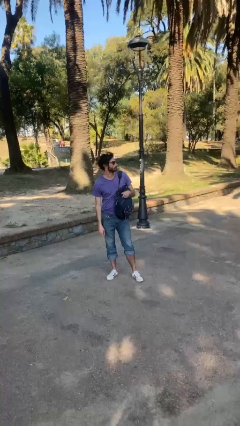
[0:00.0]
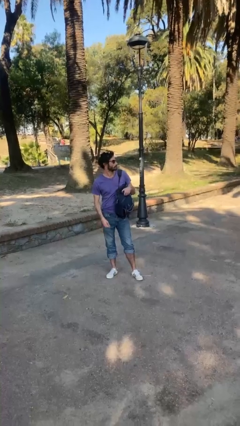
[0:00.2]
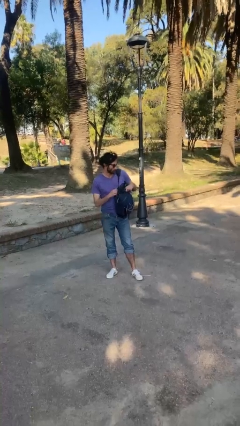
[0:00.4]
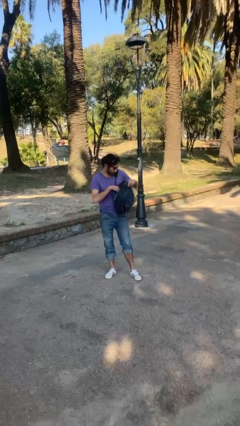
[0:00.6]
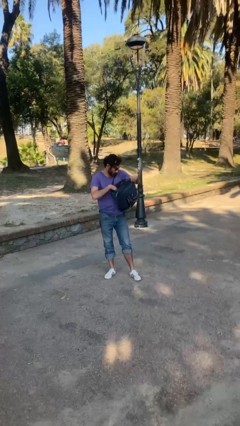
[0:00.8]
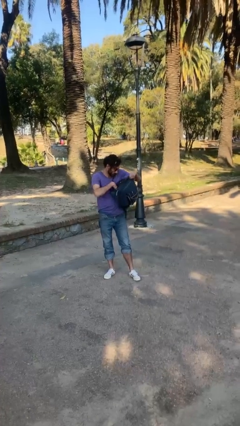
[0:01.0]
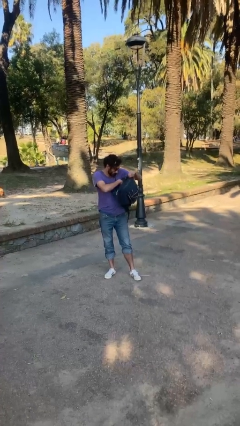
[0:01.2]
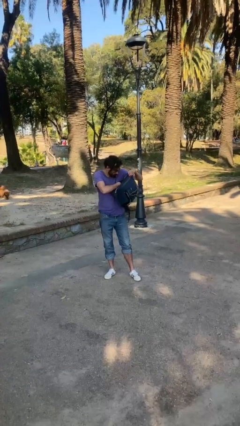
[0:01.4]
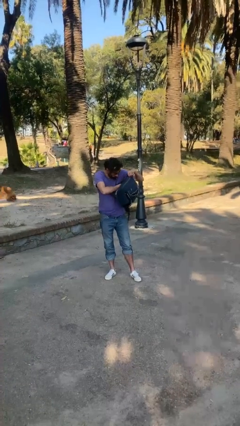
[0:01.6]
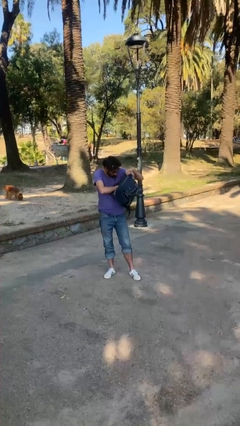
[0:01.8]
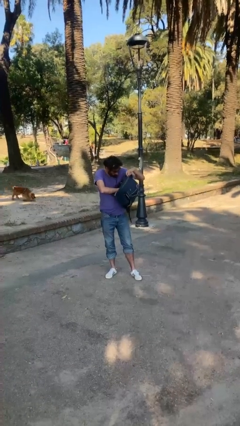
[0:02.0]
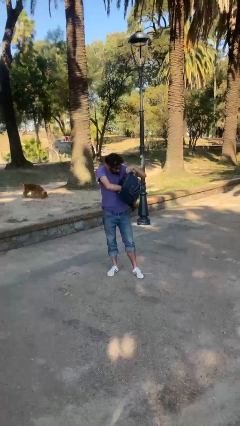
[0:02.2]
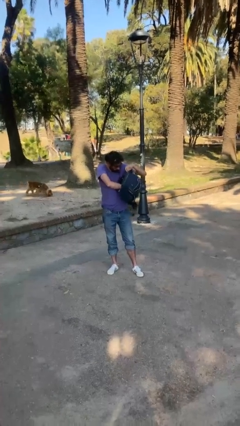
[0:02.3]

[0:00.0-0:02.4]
person searches in backpack

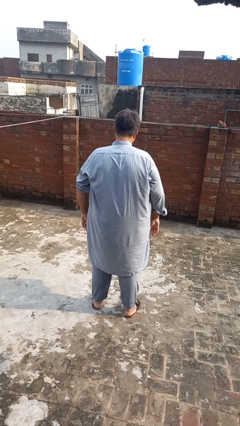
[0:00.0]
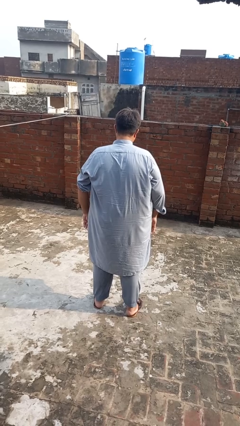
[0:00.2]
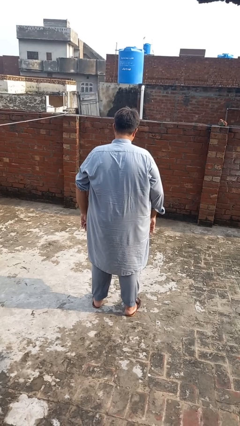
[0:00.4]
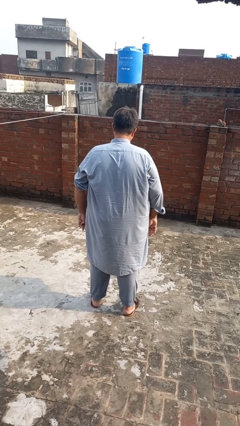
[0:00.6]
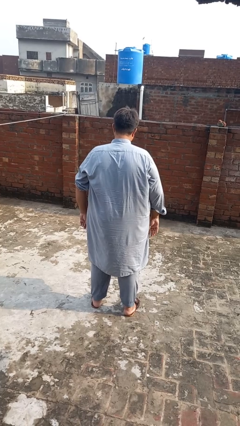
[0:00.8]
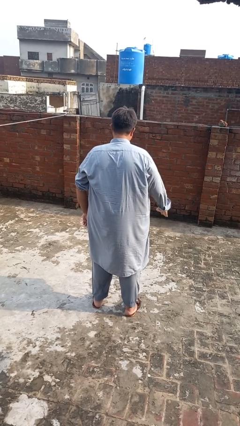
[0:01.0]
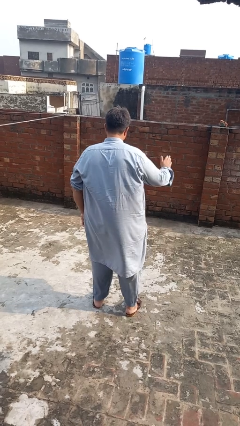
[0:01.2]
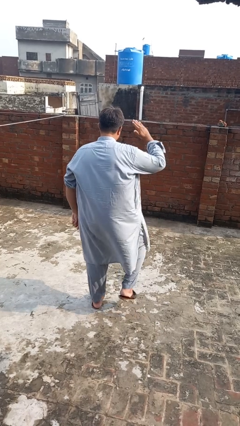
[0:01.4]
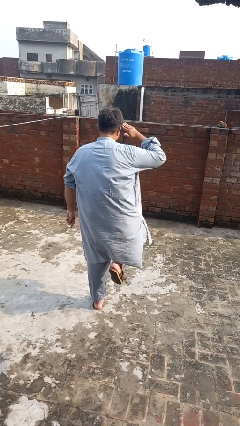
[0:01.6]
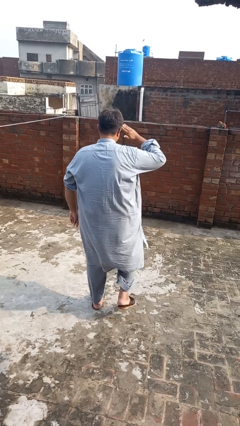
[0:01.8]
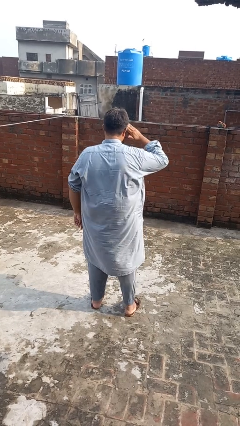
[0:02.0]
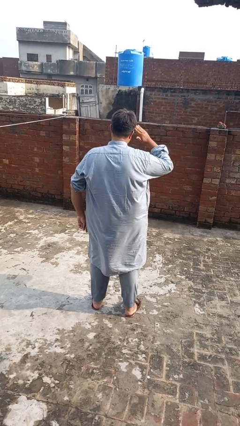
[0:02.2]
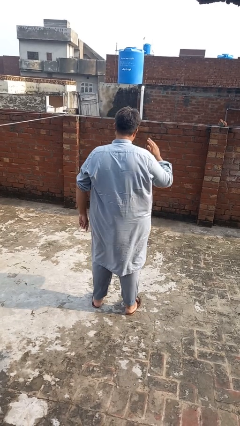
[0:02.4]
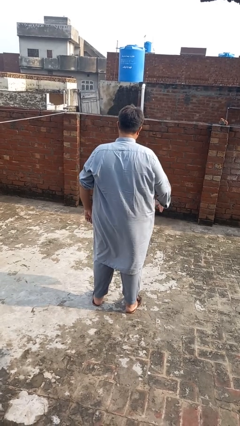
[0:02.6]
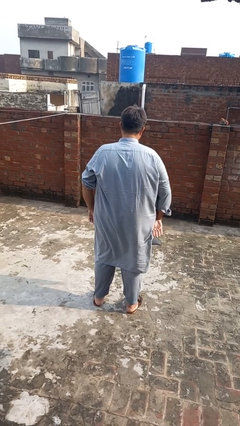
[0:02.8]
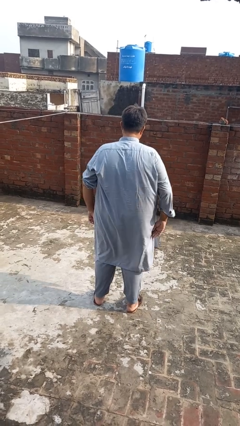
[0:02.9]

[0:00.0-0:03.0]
person salutes

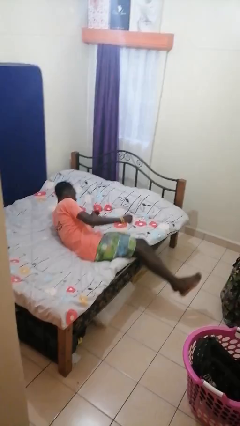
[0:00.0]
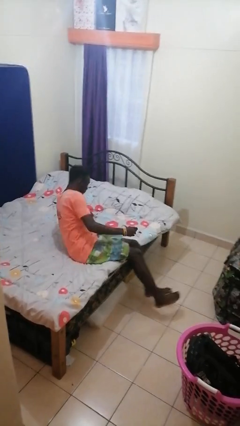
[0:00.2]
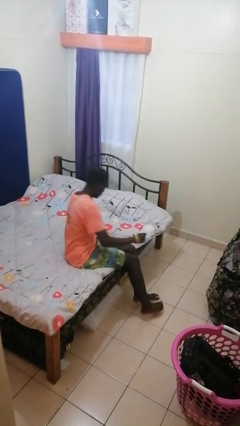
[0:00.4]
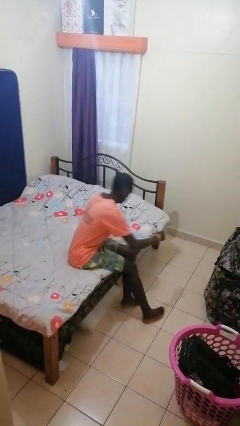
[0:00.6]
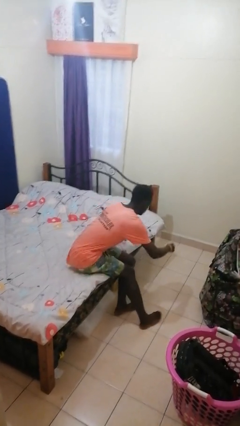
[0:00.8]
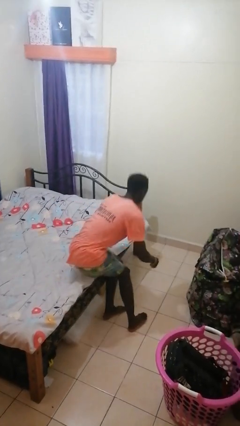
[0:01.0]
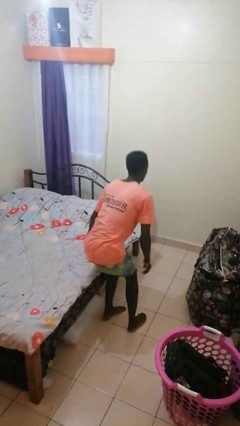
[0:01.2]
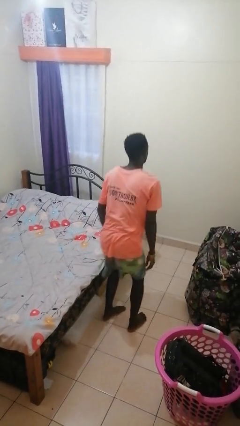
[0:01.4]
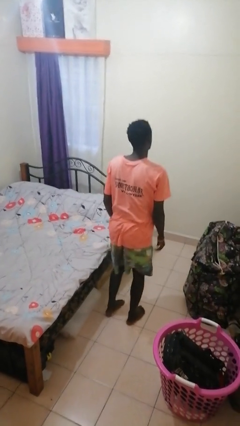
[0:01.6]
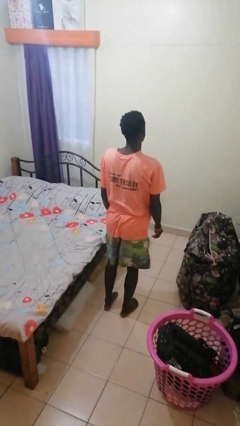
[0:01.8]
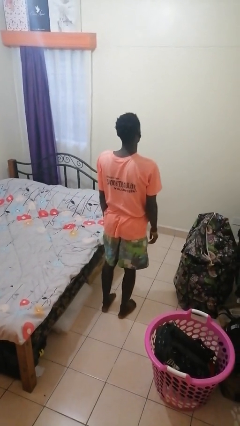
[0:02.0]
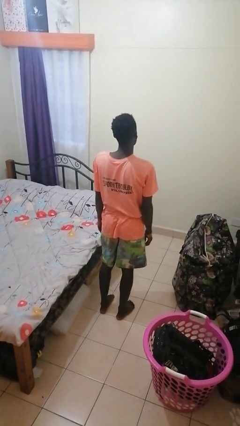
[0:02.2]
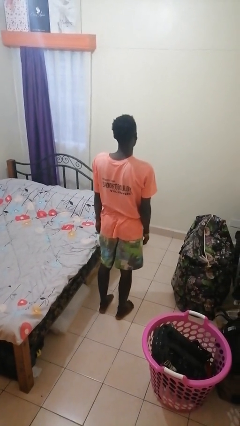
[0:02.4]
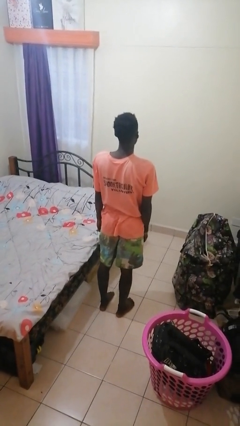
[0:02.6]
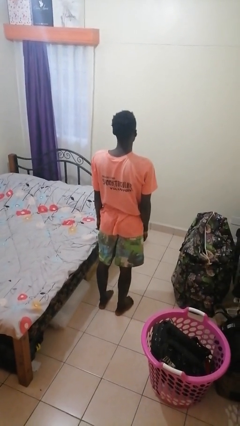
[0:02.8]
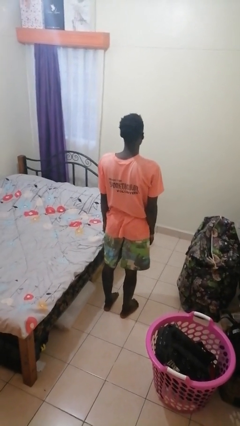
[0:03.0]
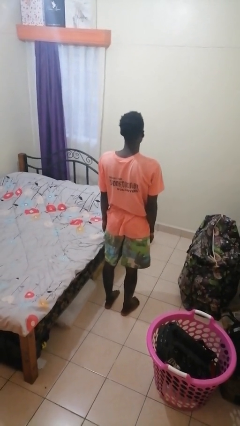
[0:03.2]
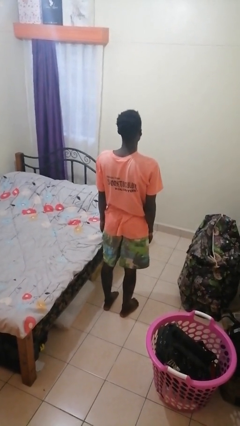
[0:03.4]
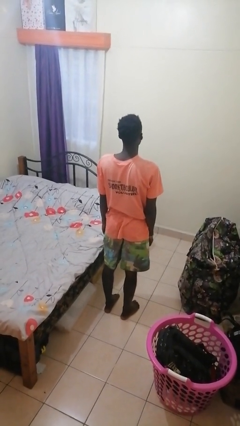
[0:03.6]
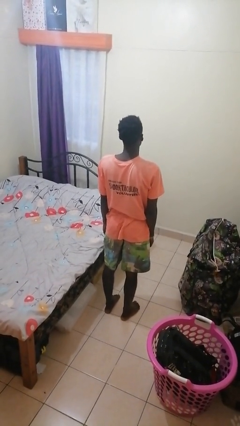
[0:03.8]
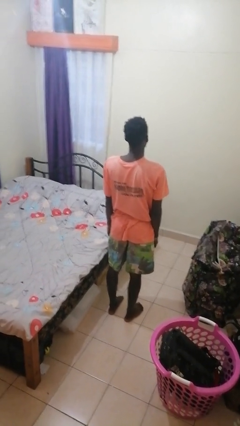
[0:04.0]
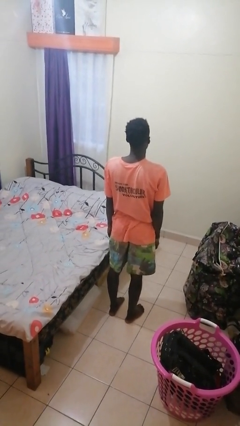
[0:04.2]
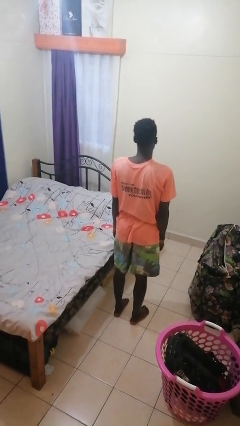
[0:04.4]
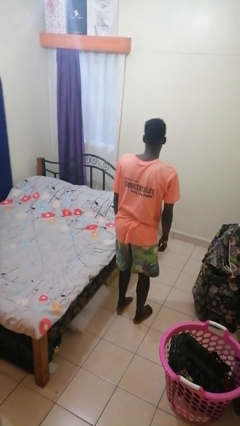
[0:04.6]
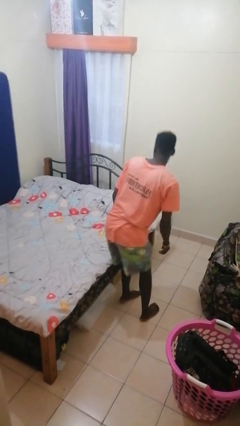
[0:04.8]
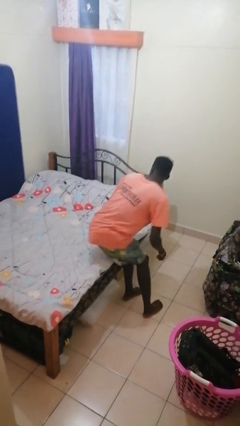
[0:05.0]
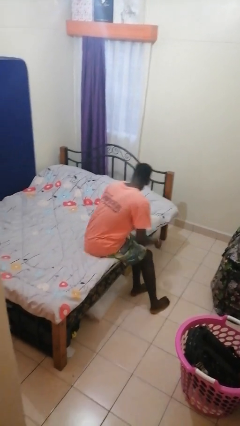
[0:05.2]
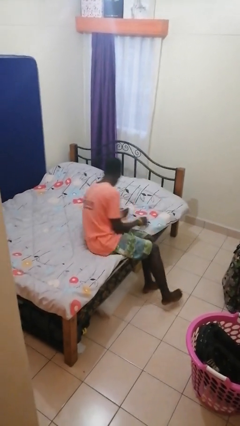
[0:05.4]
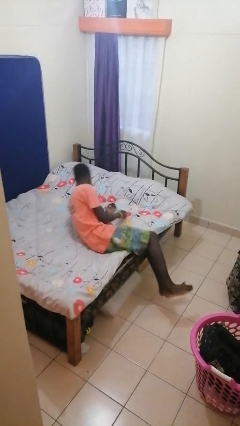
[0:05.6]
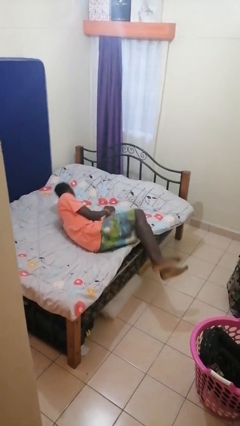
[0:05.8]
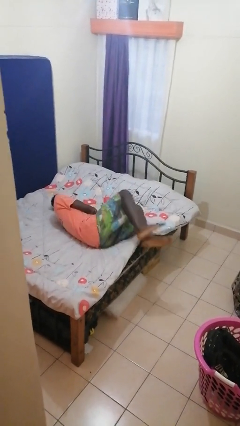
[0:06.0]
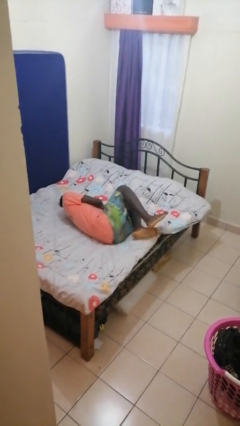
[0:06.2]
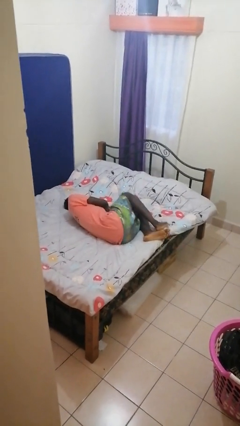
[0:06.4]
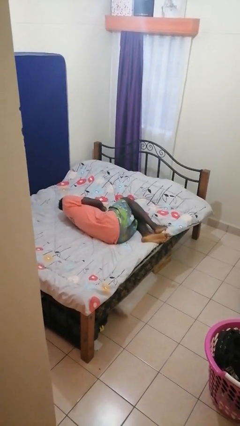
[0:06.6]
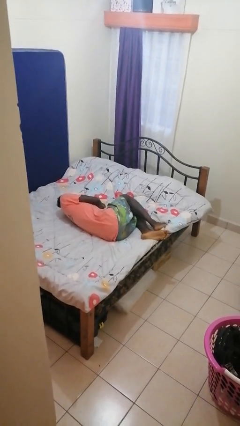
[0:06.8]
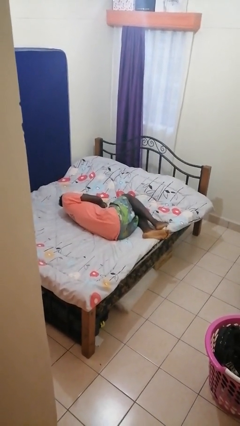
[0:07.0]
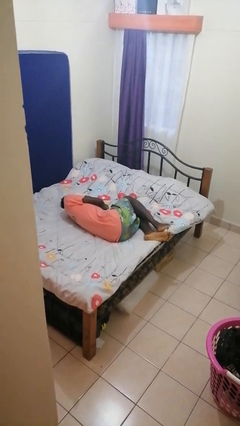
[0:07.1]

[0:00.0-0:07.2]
person puts on shoes

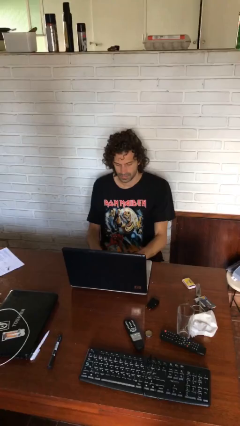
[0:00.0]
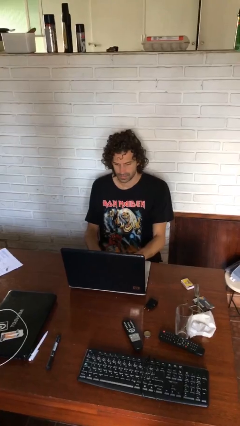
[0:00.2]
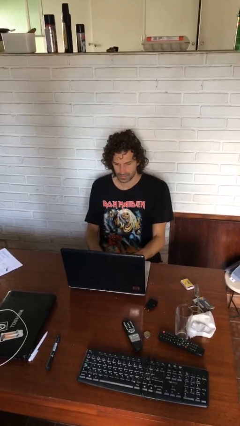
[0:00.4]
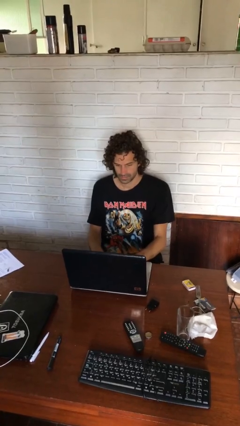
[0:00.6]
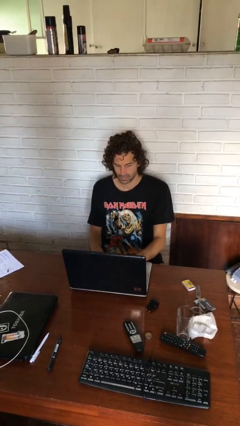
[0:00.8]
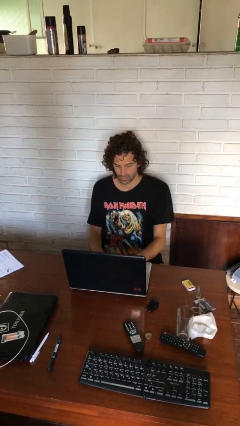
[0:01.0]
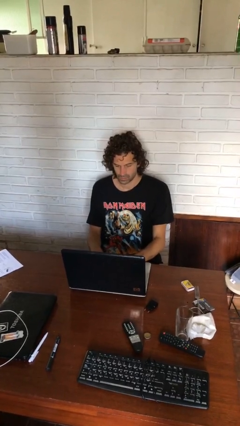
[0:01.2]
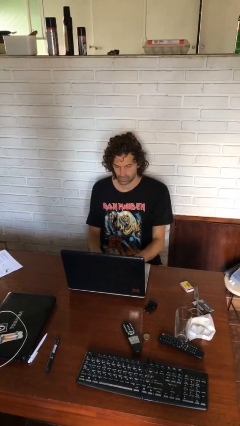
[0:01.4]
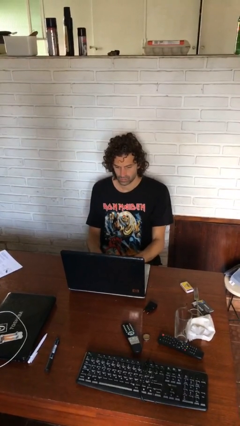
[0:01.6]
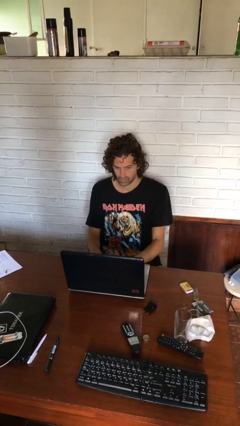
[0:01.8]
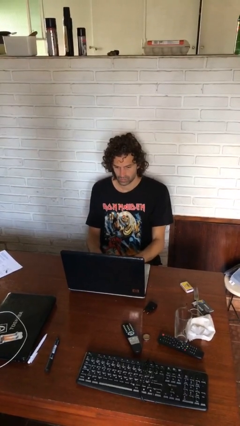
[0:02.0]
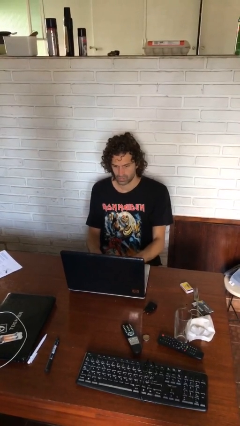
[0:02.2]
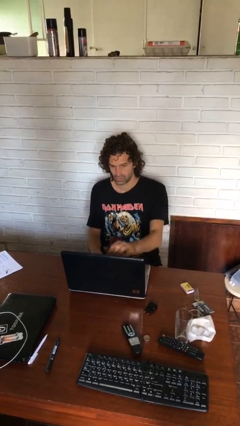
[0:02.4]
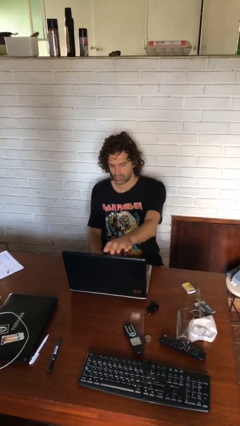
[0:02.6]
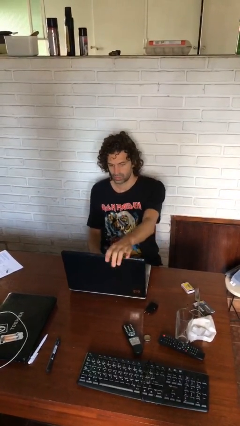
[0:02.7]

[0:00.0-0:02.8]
person interacts with laptop

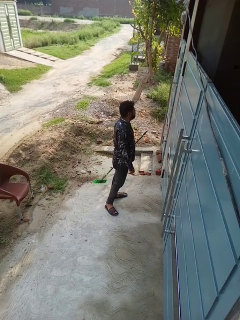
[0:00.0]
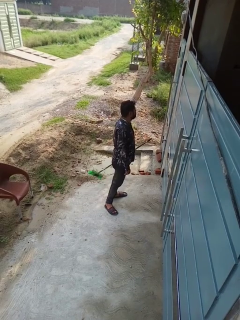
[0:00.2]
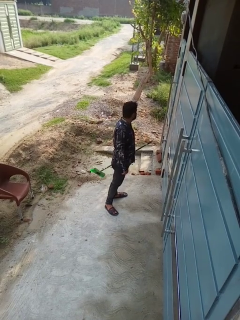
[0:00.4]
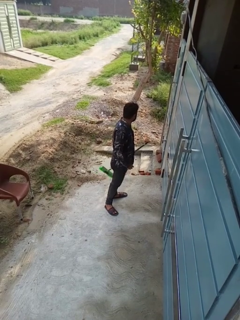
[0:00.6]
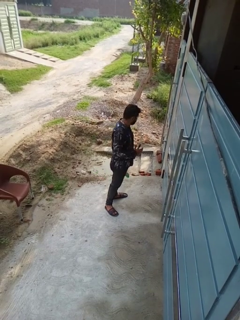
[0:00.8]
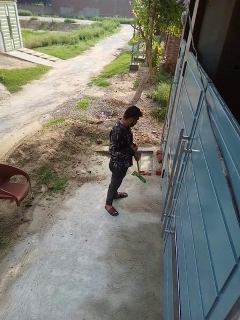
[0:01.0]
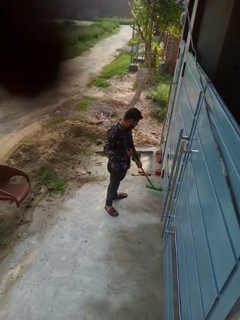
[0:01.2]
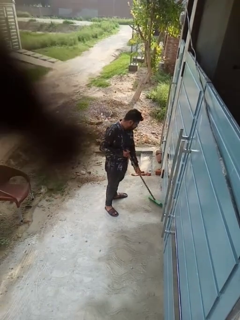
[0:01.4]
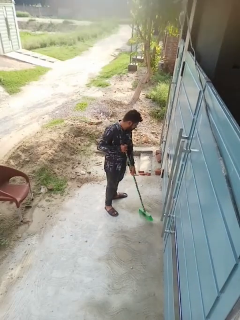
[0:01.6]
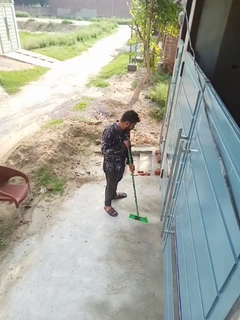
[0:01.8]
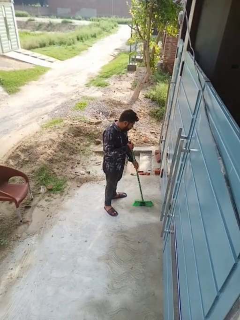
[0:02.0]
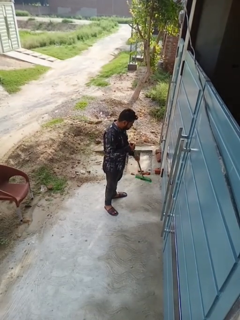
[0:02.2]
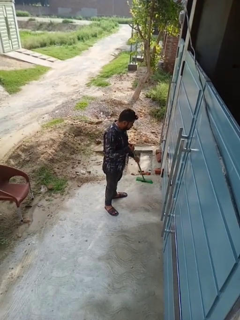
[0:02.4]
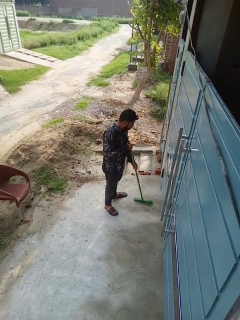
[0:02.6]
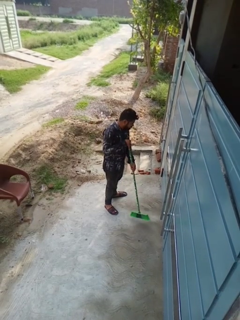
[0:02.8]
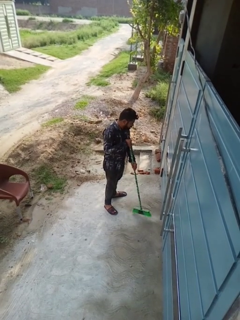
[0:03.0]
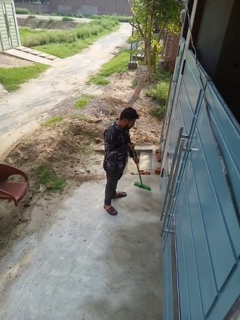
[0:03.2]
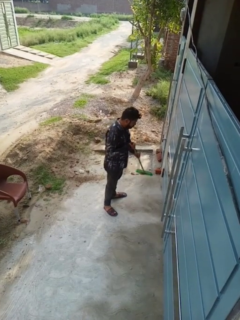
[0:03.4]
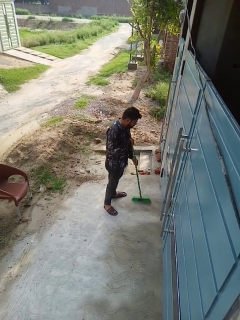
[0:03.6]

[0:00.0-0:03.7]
person sweeps floor
